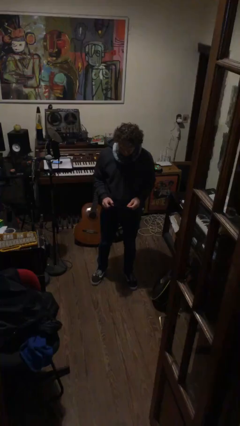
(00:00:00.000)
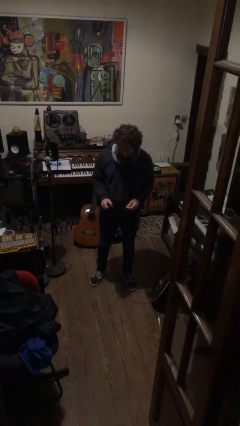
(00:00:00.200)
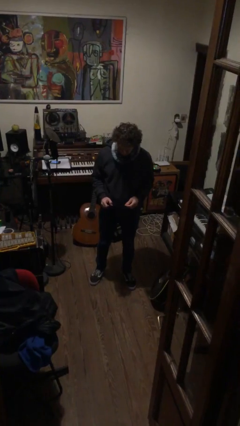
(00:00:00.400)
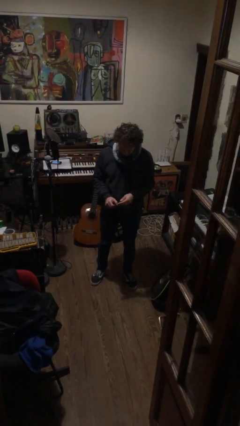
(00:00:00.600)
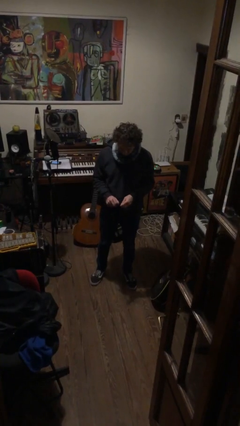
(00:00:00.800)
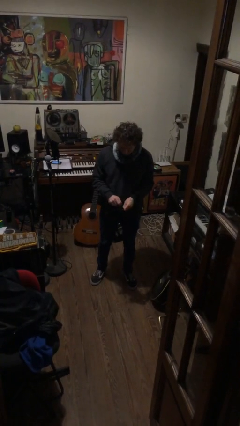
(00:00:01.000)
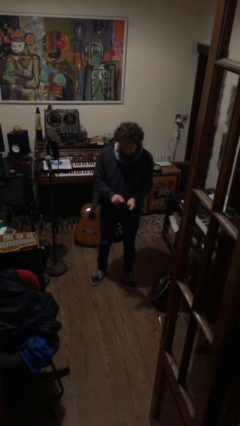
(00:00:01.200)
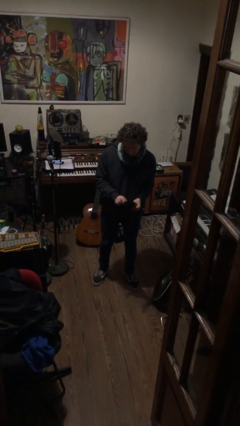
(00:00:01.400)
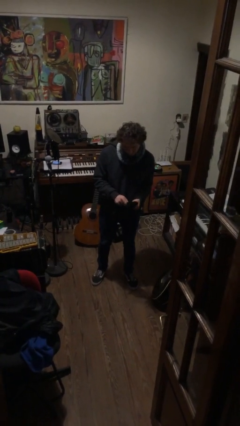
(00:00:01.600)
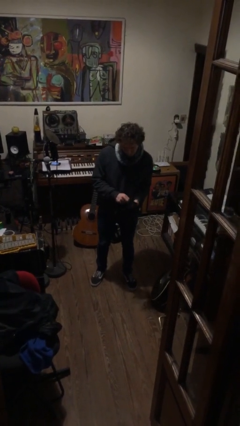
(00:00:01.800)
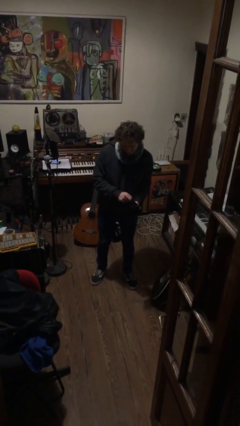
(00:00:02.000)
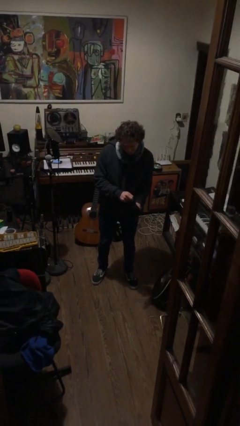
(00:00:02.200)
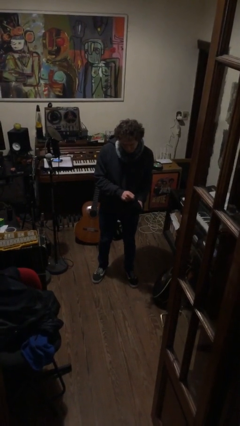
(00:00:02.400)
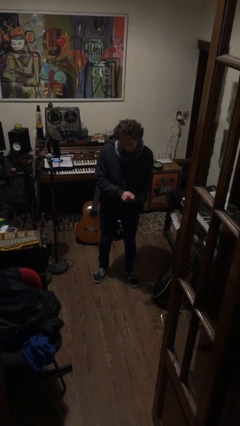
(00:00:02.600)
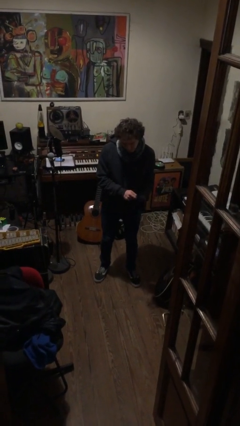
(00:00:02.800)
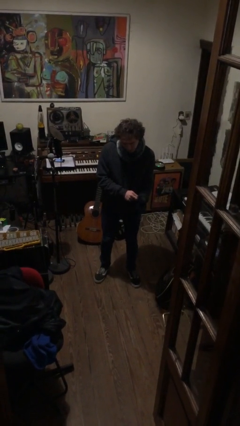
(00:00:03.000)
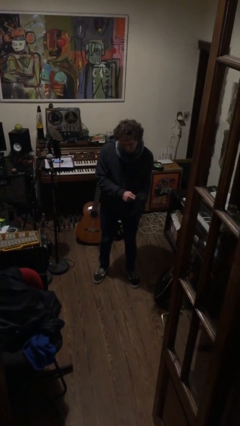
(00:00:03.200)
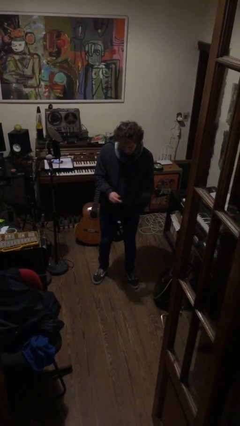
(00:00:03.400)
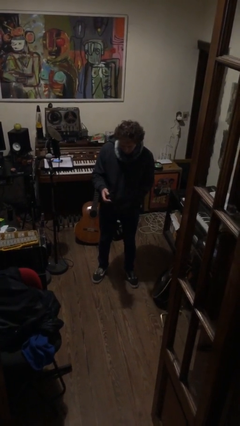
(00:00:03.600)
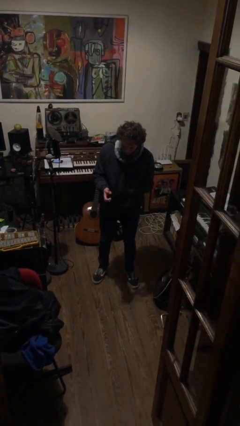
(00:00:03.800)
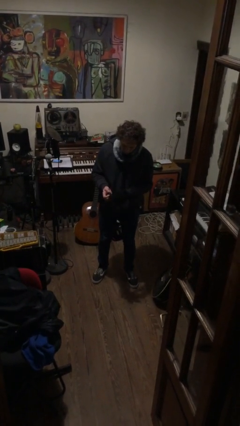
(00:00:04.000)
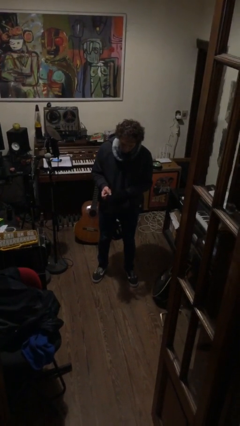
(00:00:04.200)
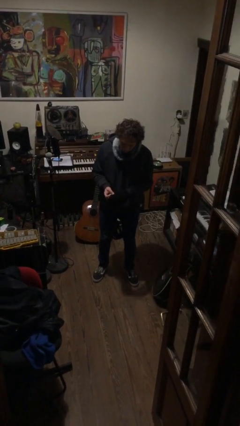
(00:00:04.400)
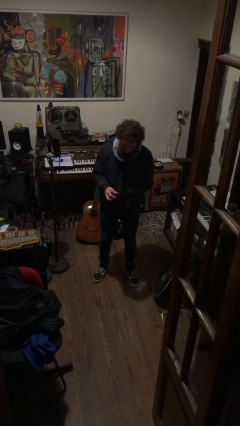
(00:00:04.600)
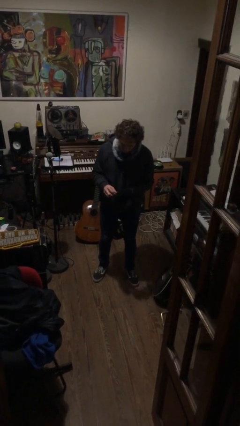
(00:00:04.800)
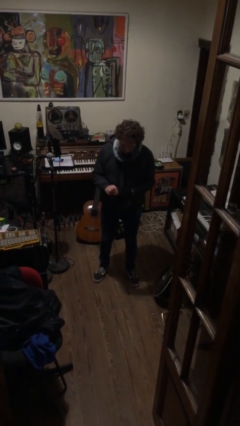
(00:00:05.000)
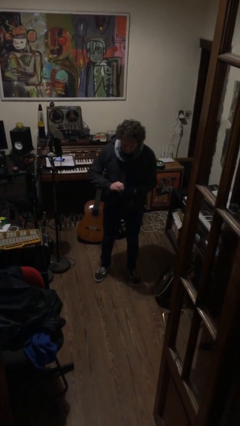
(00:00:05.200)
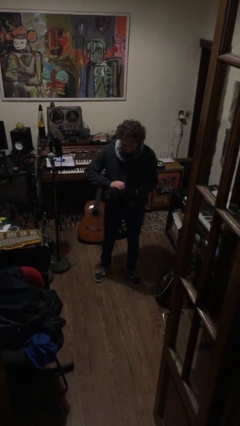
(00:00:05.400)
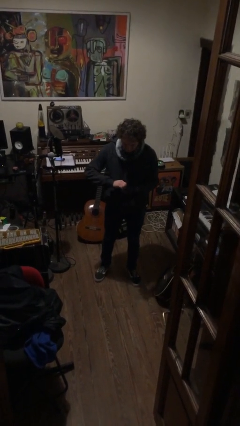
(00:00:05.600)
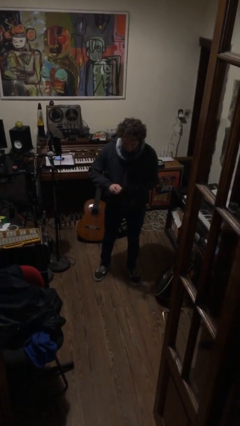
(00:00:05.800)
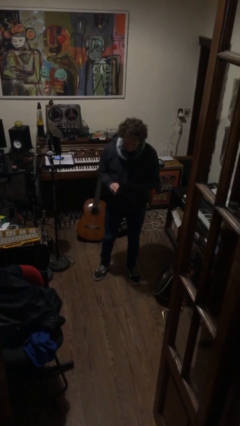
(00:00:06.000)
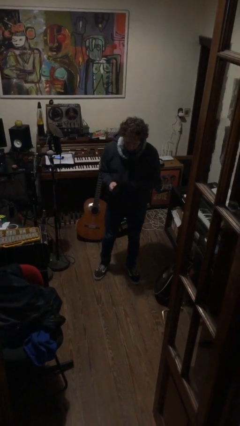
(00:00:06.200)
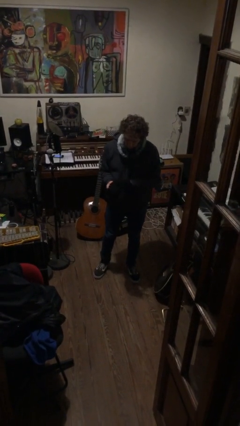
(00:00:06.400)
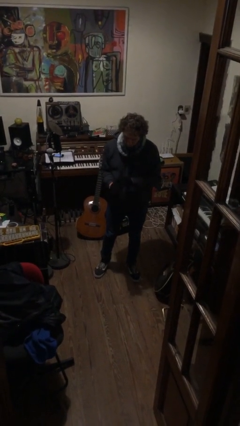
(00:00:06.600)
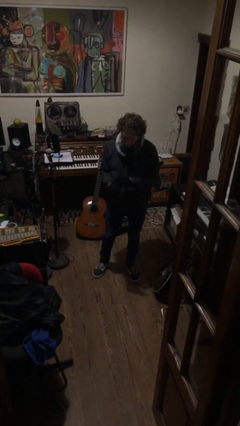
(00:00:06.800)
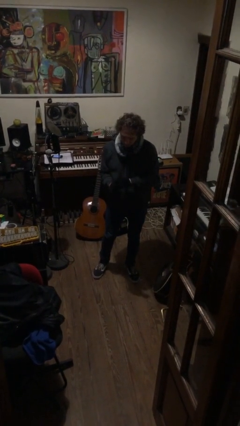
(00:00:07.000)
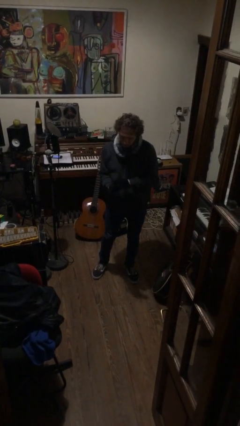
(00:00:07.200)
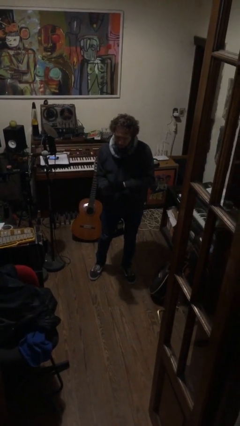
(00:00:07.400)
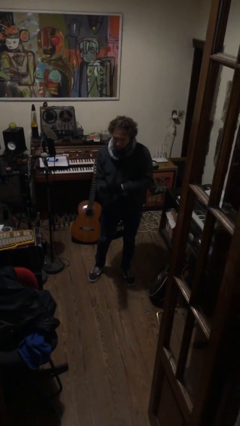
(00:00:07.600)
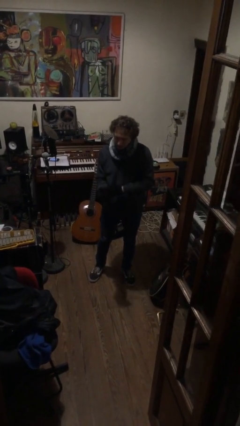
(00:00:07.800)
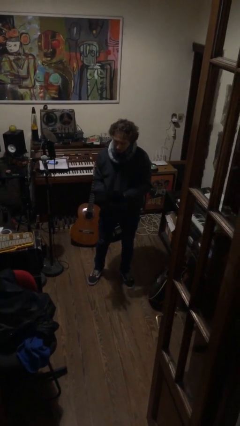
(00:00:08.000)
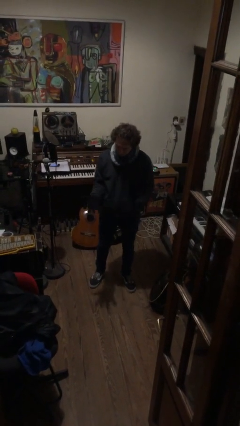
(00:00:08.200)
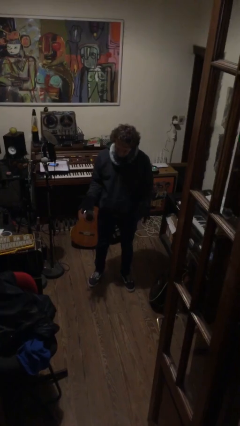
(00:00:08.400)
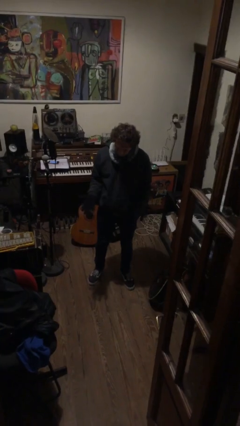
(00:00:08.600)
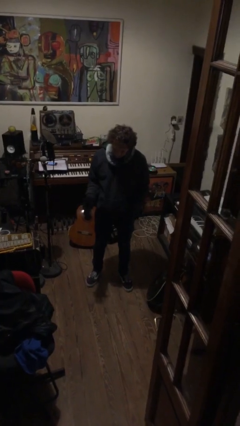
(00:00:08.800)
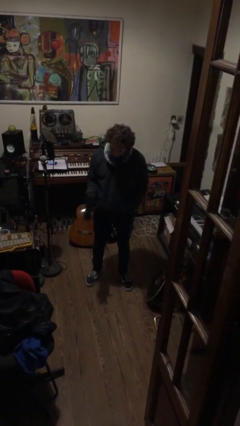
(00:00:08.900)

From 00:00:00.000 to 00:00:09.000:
person puts on gloves

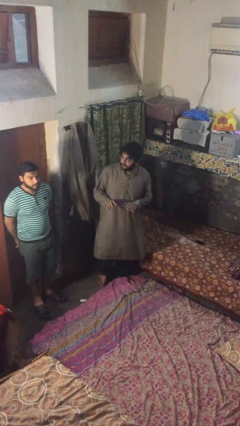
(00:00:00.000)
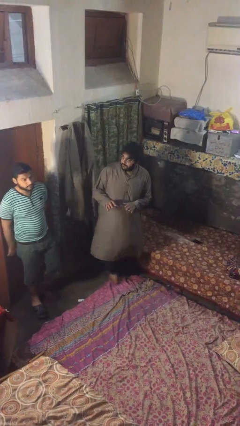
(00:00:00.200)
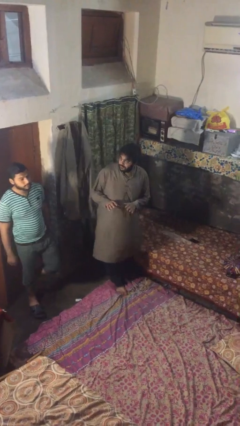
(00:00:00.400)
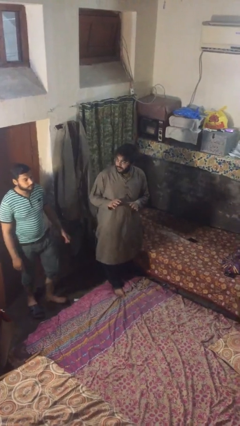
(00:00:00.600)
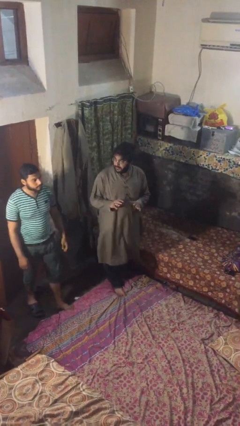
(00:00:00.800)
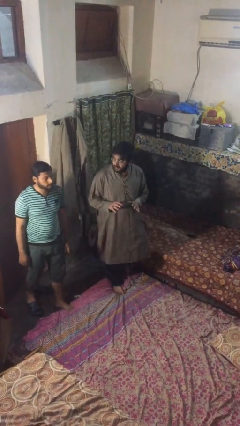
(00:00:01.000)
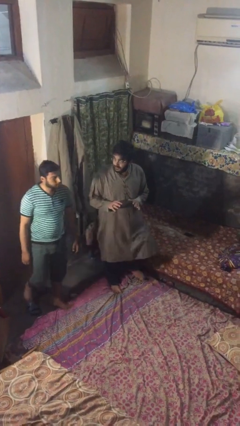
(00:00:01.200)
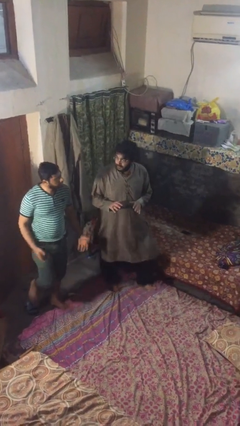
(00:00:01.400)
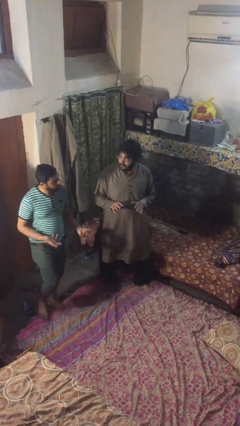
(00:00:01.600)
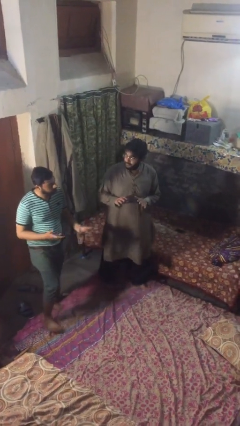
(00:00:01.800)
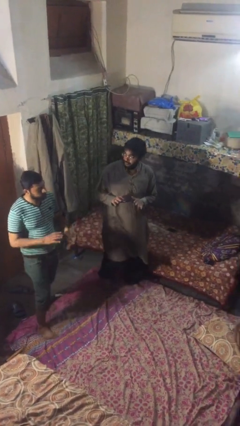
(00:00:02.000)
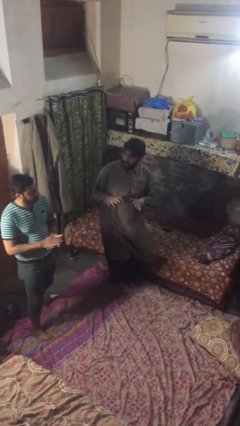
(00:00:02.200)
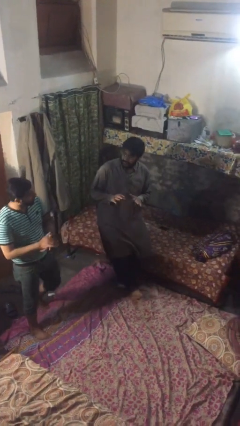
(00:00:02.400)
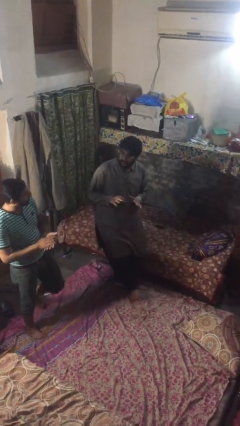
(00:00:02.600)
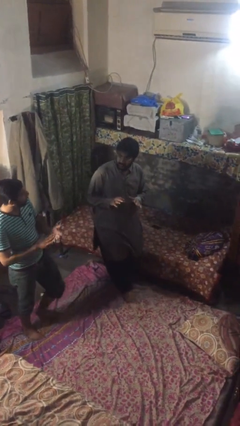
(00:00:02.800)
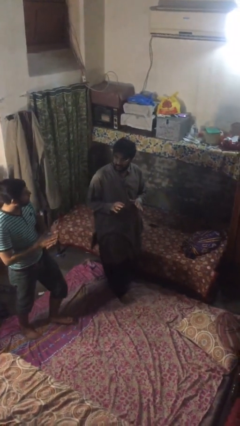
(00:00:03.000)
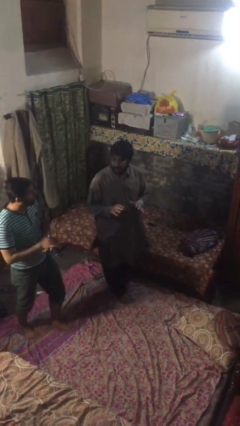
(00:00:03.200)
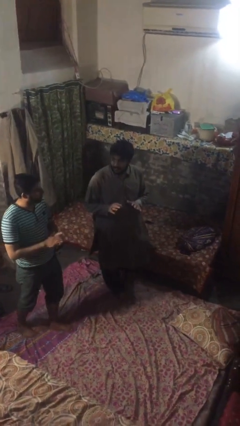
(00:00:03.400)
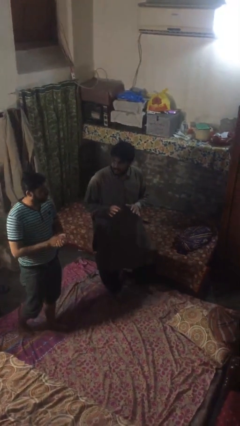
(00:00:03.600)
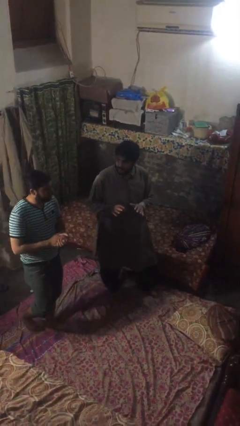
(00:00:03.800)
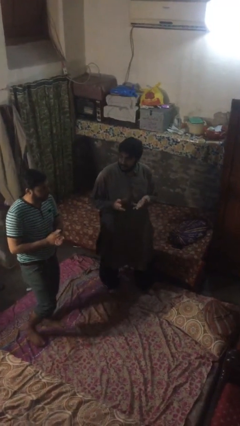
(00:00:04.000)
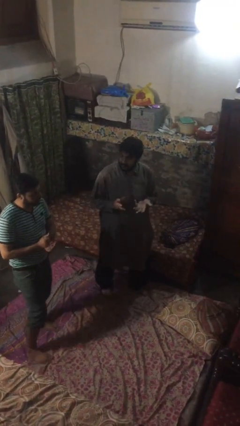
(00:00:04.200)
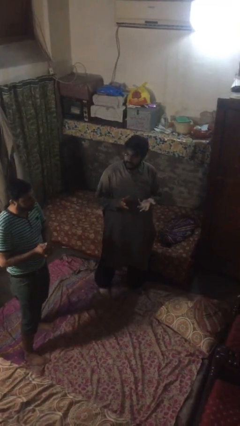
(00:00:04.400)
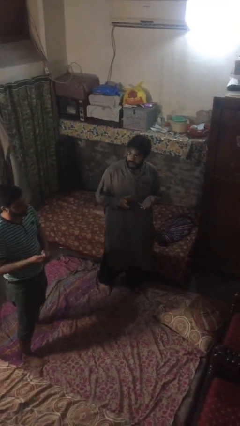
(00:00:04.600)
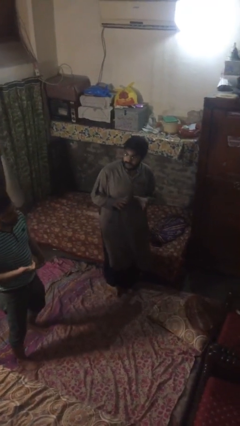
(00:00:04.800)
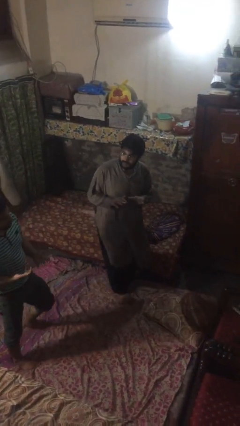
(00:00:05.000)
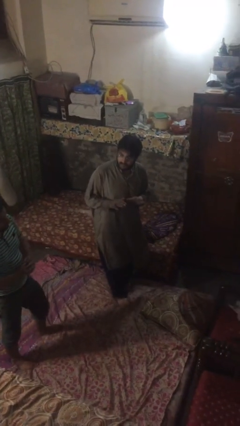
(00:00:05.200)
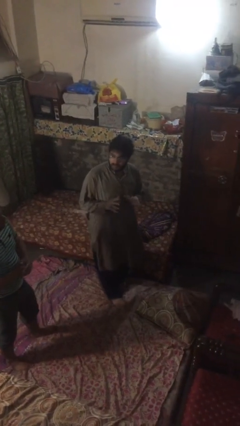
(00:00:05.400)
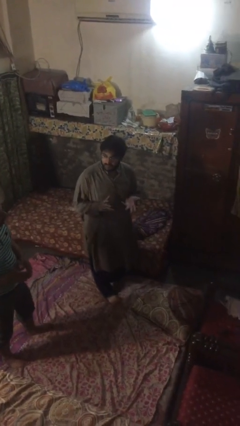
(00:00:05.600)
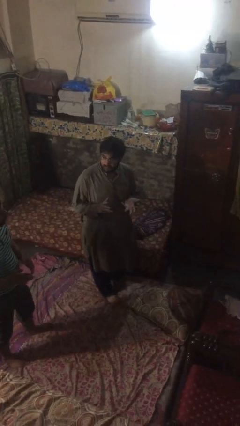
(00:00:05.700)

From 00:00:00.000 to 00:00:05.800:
person talks to person

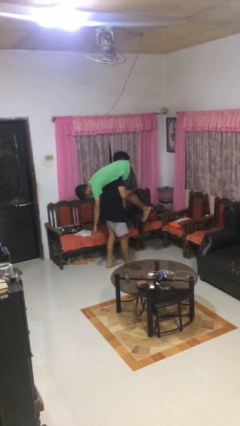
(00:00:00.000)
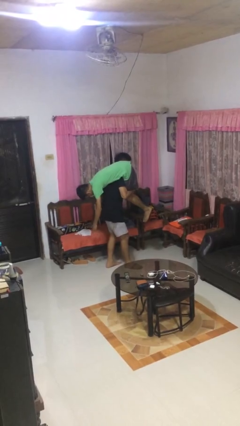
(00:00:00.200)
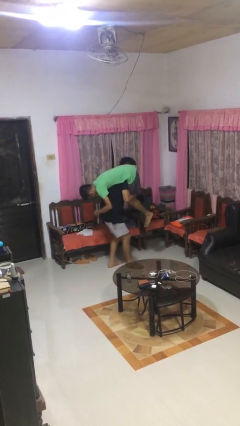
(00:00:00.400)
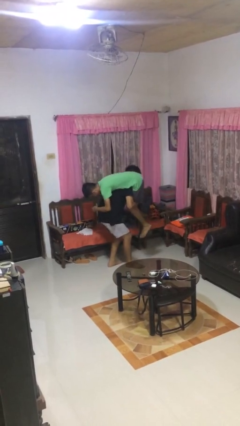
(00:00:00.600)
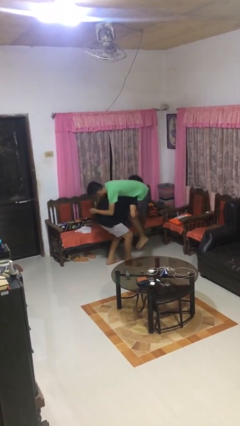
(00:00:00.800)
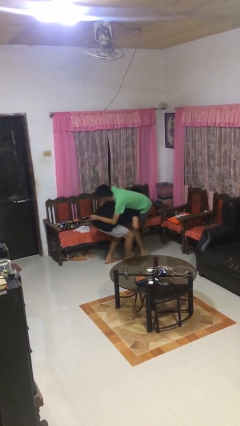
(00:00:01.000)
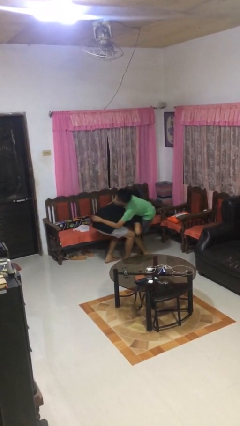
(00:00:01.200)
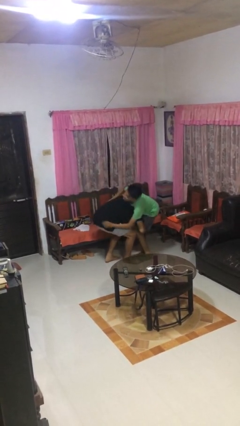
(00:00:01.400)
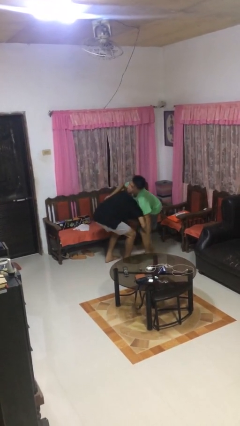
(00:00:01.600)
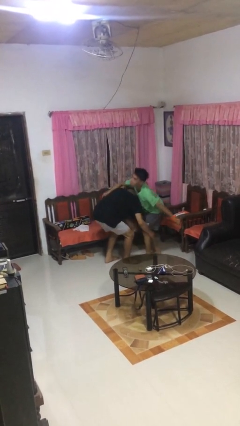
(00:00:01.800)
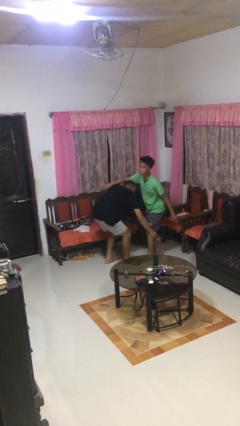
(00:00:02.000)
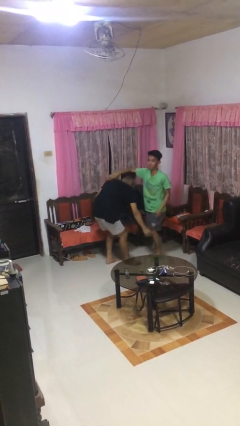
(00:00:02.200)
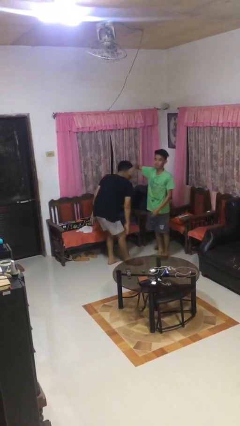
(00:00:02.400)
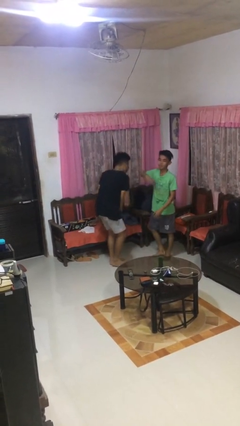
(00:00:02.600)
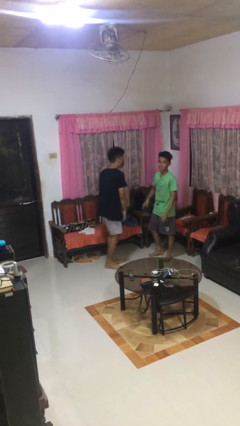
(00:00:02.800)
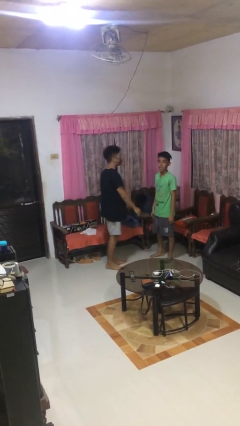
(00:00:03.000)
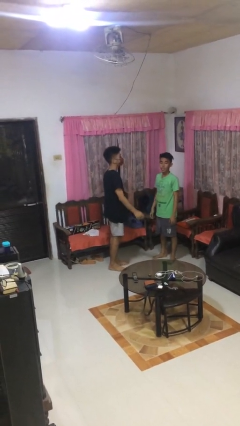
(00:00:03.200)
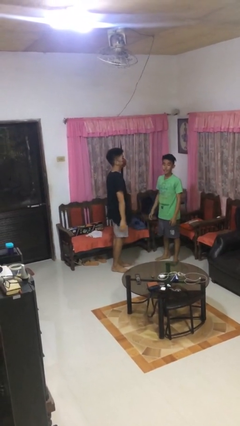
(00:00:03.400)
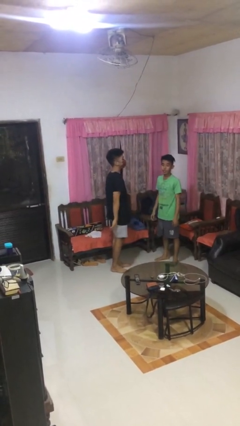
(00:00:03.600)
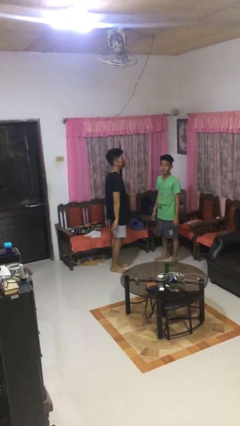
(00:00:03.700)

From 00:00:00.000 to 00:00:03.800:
person puts down person
